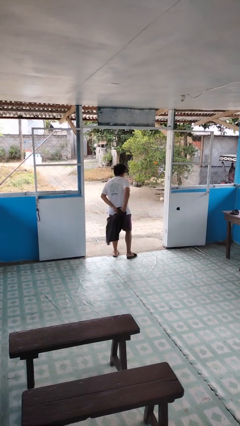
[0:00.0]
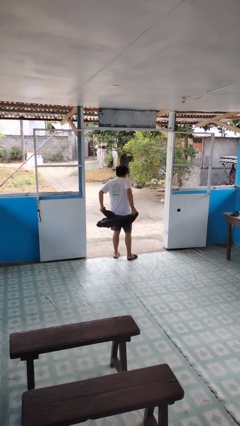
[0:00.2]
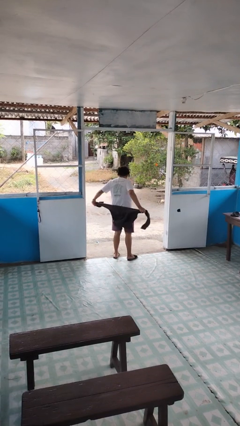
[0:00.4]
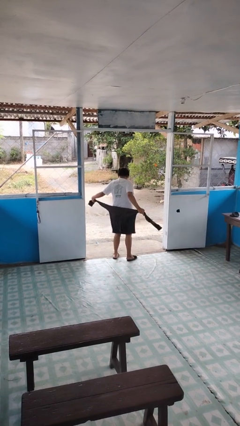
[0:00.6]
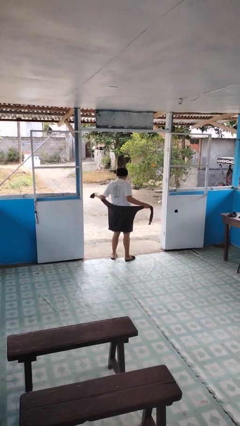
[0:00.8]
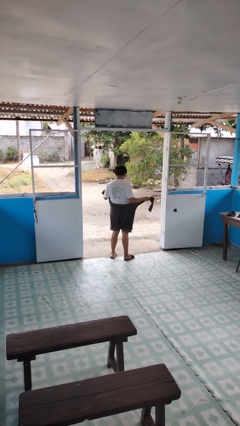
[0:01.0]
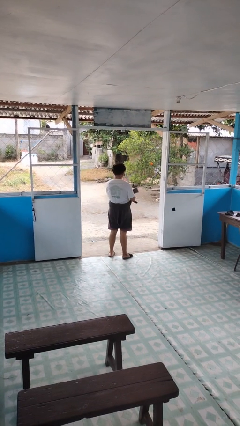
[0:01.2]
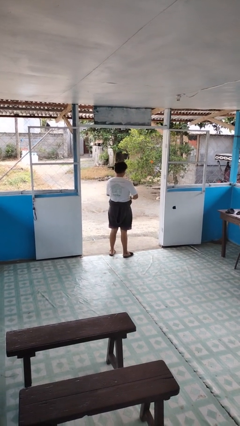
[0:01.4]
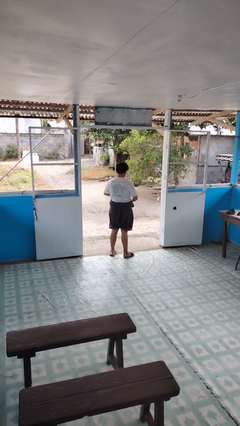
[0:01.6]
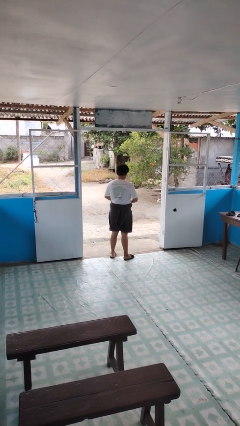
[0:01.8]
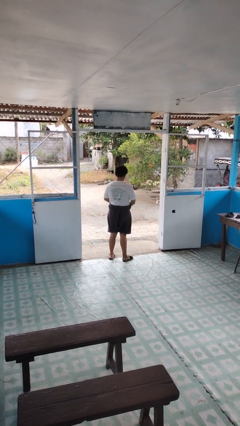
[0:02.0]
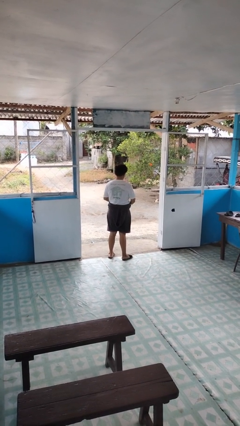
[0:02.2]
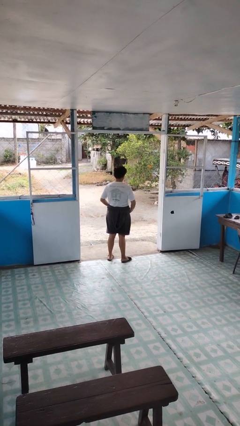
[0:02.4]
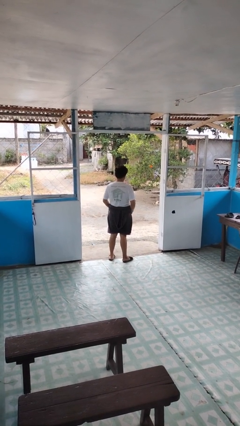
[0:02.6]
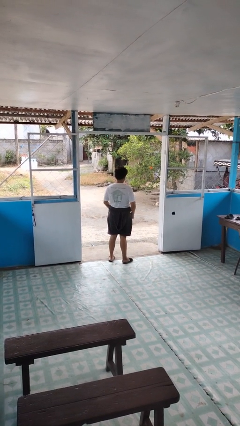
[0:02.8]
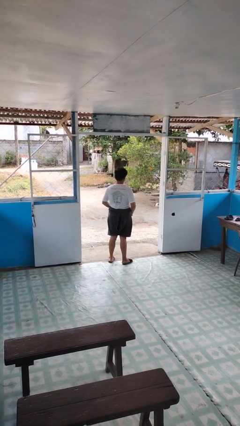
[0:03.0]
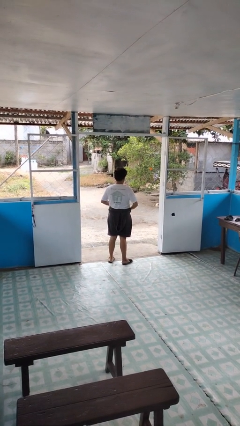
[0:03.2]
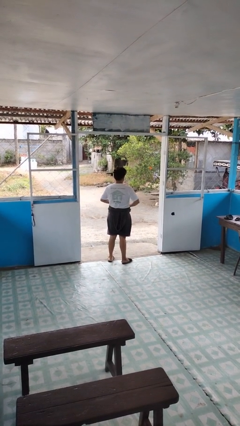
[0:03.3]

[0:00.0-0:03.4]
person ties jacket around waist

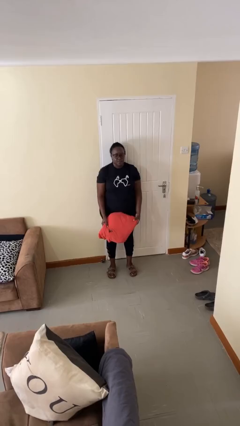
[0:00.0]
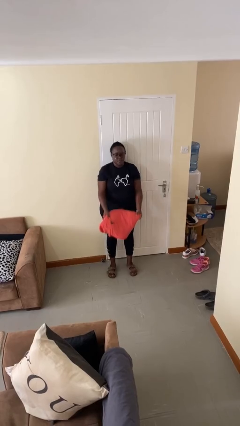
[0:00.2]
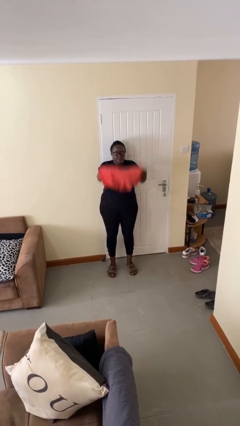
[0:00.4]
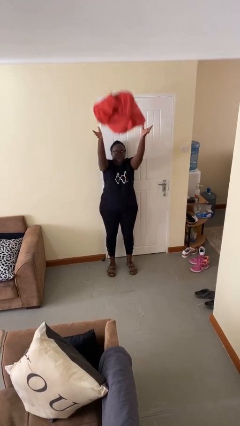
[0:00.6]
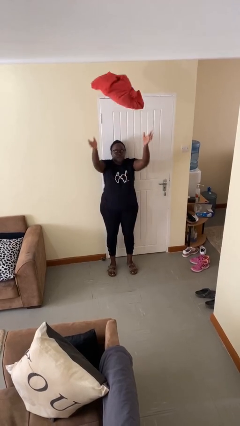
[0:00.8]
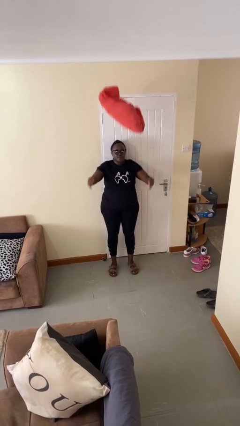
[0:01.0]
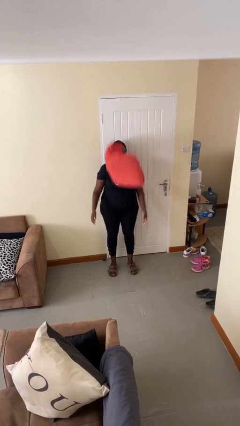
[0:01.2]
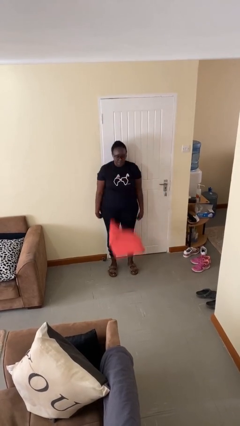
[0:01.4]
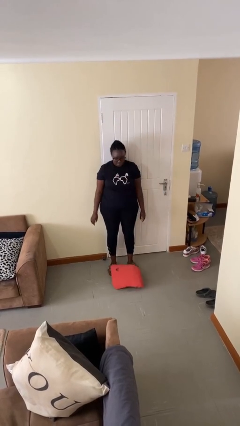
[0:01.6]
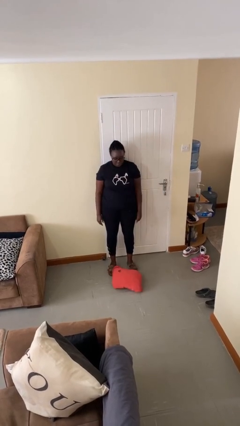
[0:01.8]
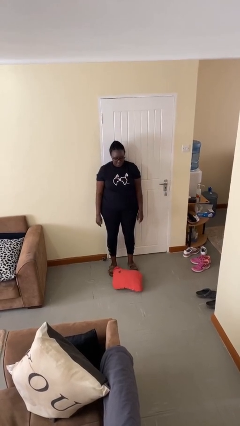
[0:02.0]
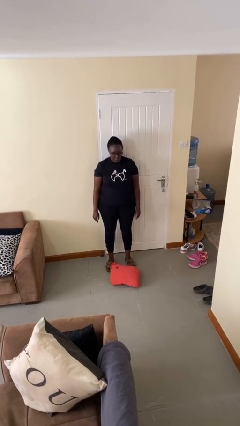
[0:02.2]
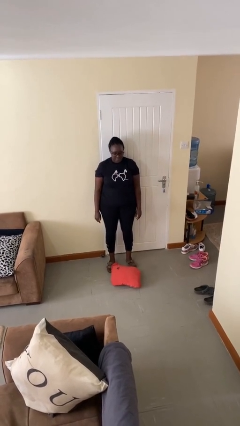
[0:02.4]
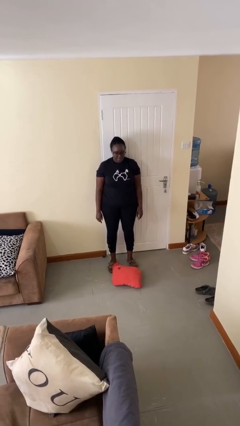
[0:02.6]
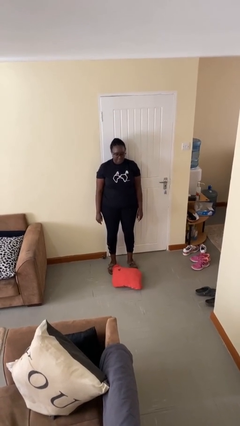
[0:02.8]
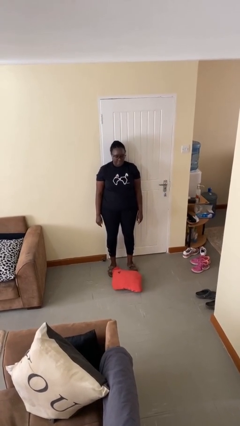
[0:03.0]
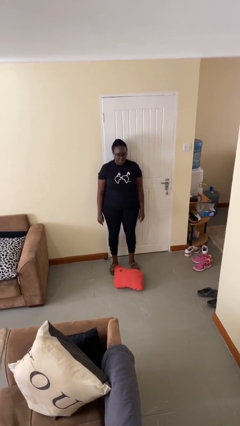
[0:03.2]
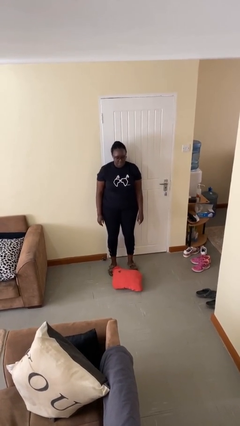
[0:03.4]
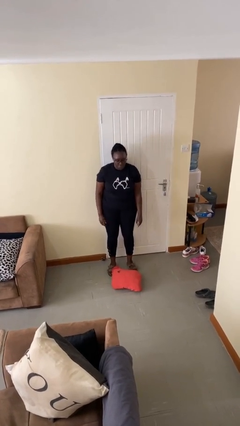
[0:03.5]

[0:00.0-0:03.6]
person throws object into air

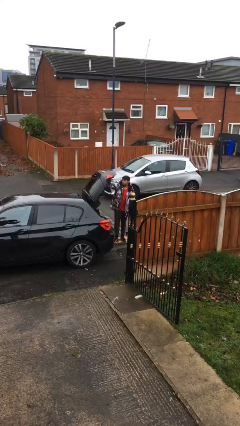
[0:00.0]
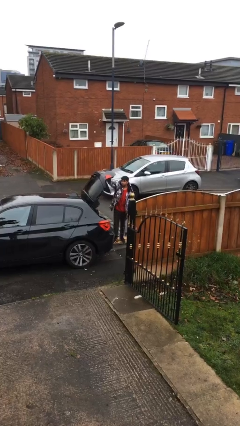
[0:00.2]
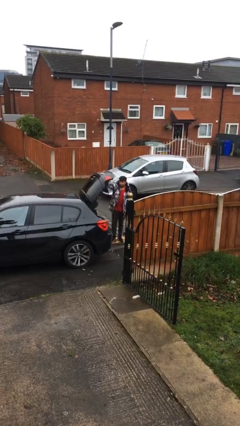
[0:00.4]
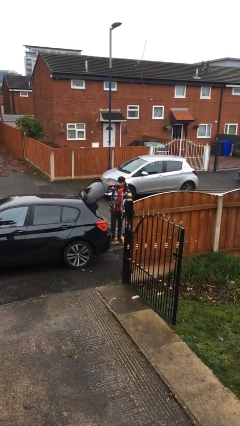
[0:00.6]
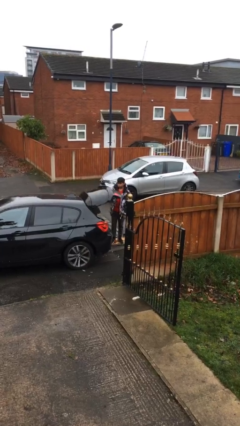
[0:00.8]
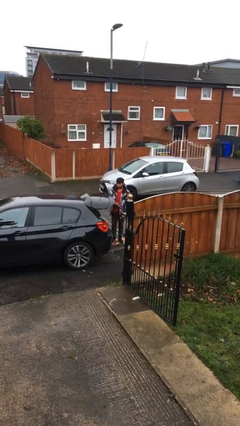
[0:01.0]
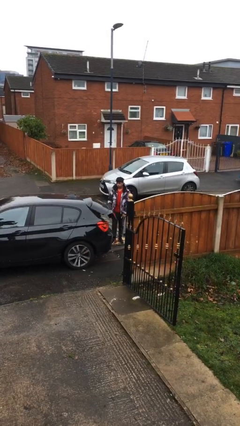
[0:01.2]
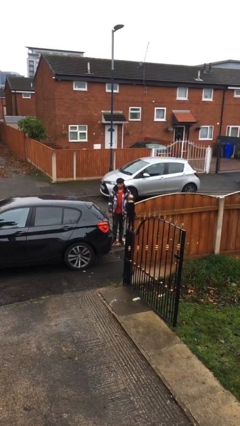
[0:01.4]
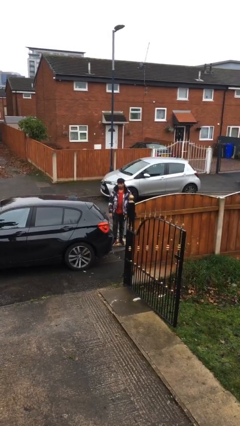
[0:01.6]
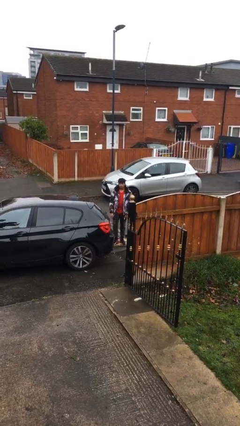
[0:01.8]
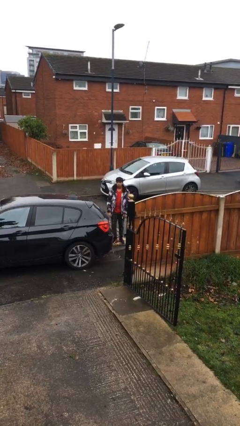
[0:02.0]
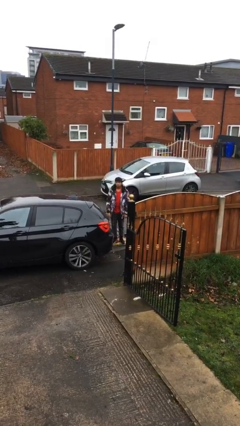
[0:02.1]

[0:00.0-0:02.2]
person closes car trunk

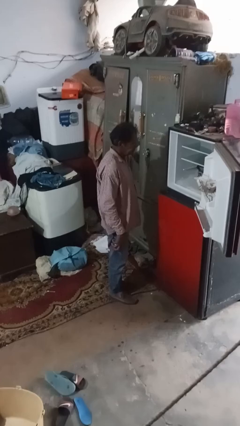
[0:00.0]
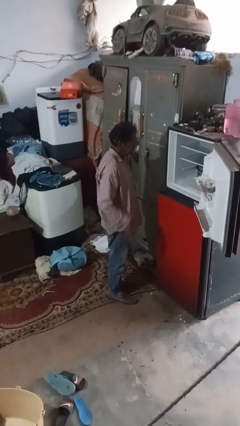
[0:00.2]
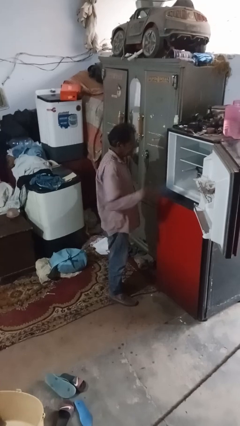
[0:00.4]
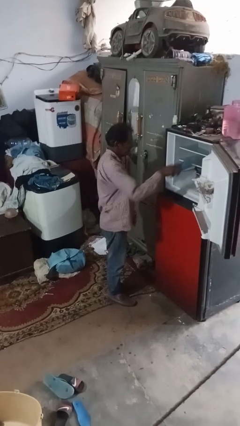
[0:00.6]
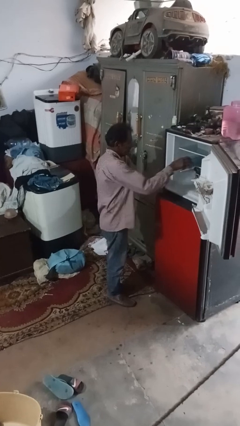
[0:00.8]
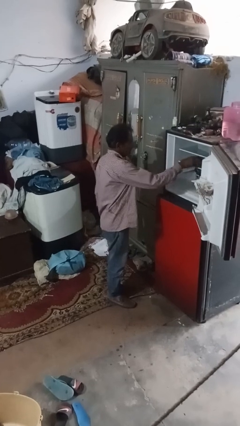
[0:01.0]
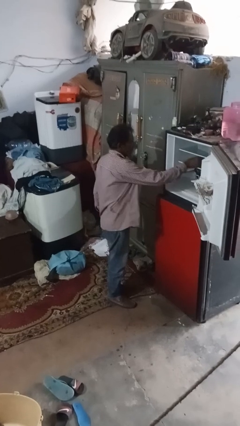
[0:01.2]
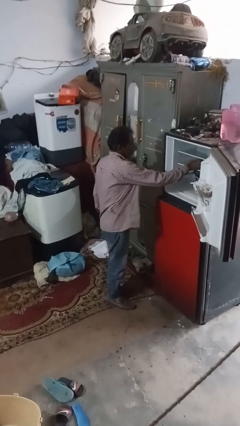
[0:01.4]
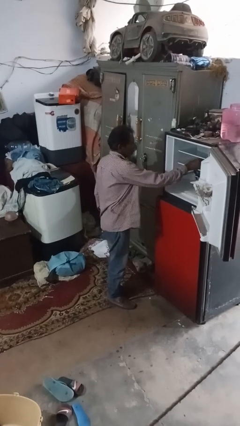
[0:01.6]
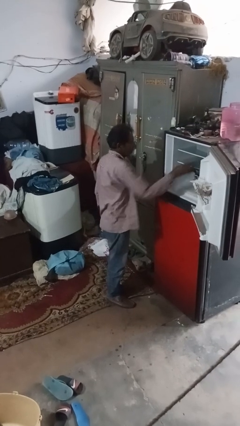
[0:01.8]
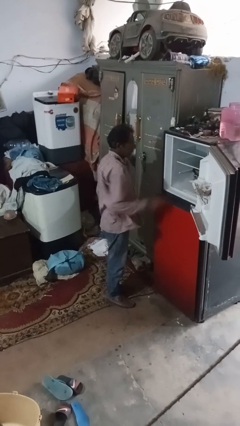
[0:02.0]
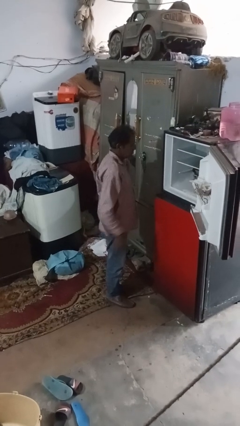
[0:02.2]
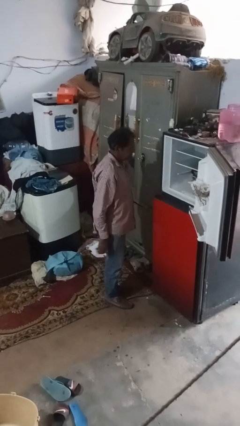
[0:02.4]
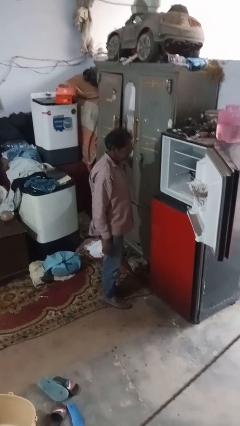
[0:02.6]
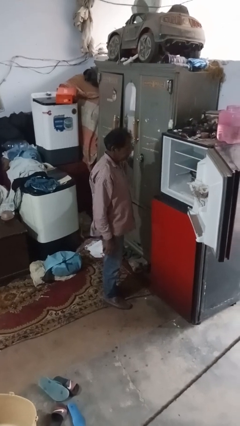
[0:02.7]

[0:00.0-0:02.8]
person puts object into refrigerator

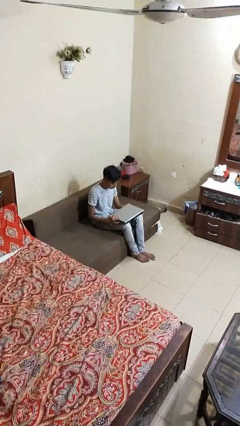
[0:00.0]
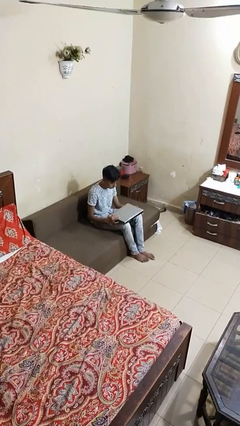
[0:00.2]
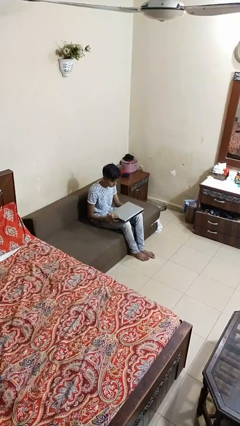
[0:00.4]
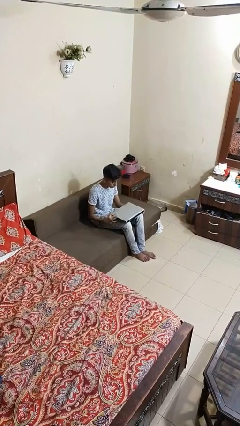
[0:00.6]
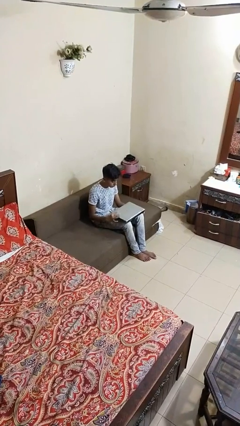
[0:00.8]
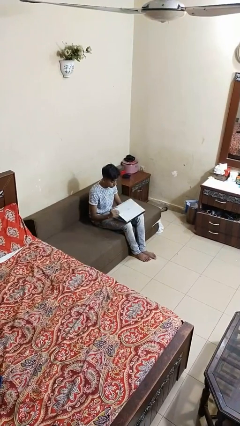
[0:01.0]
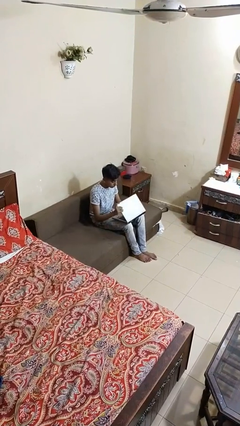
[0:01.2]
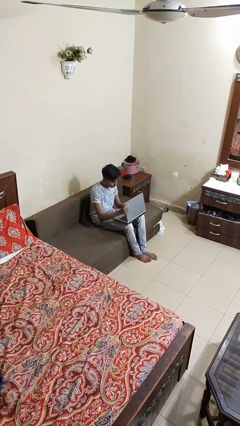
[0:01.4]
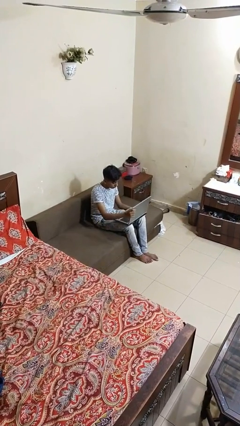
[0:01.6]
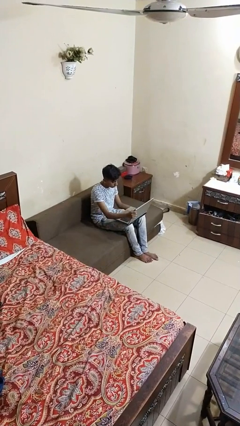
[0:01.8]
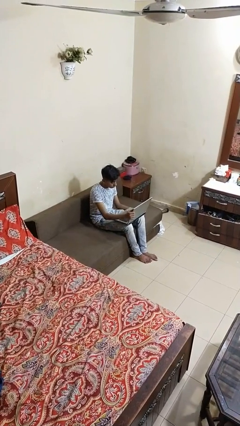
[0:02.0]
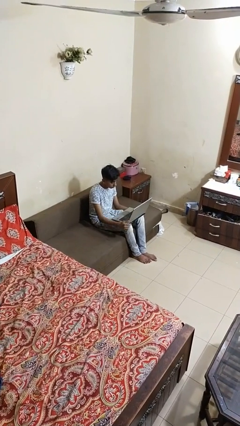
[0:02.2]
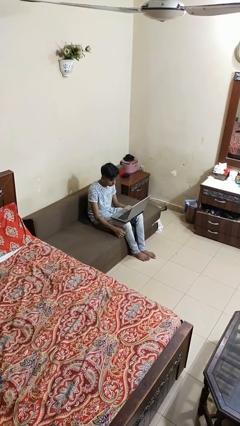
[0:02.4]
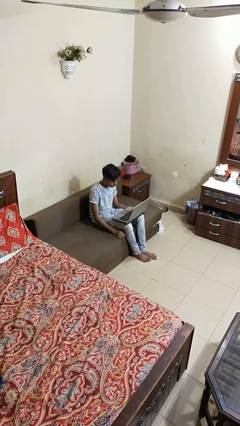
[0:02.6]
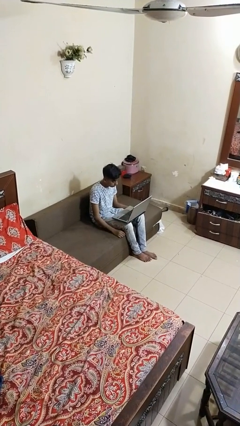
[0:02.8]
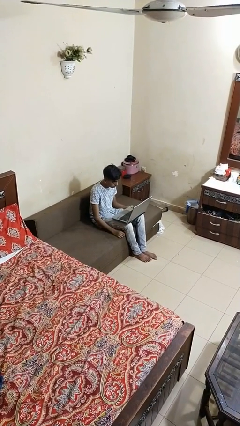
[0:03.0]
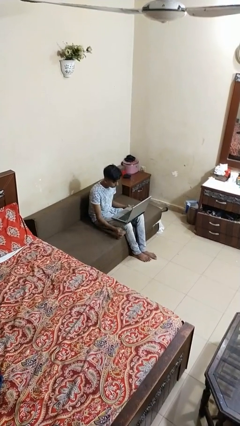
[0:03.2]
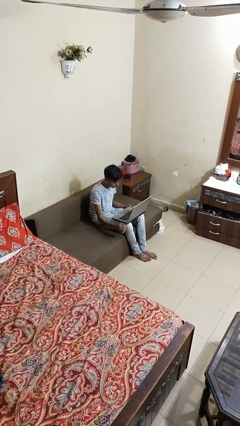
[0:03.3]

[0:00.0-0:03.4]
person opens laptop

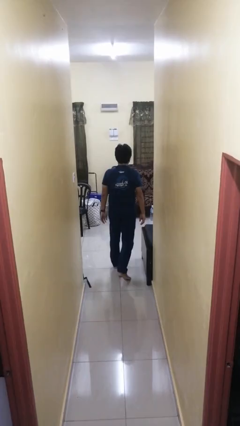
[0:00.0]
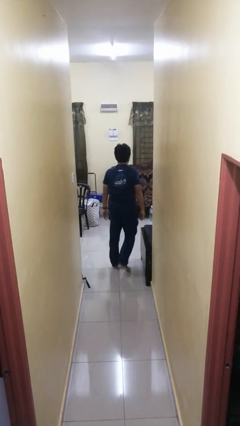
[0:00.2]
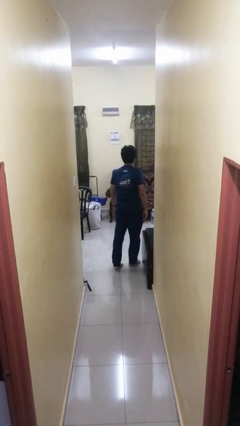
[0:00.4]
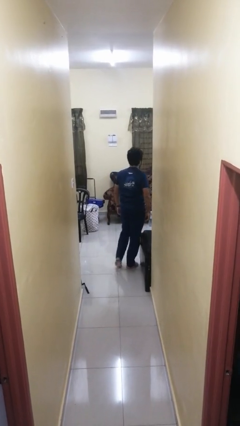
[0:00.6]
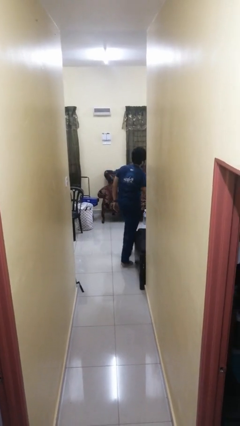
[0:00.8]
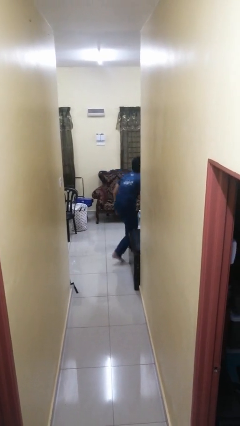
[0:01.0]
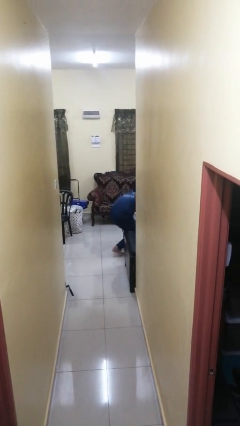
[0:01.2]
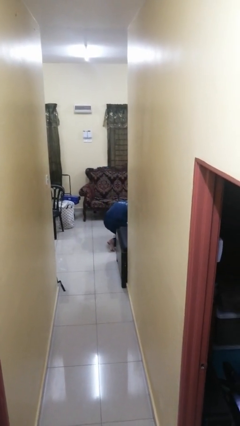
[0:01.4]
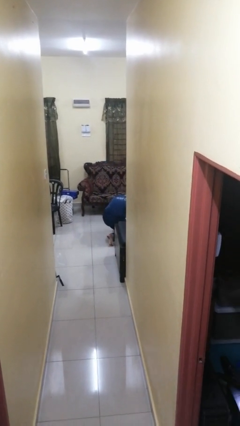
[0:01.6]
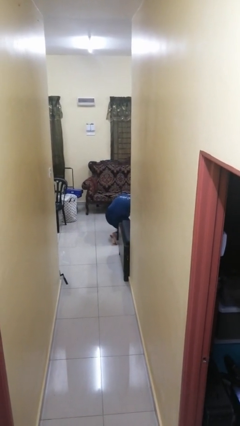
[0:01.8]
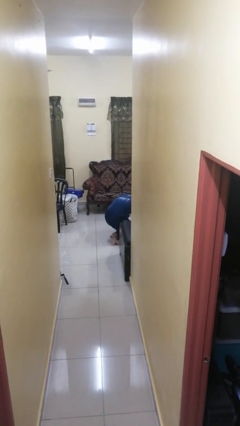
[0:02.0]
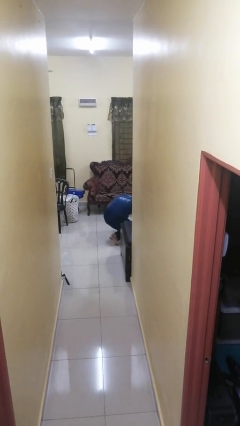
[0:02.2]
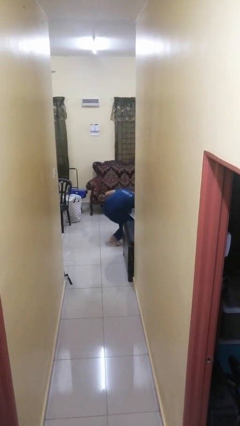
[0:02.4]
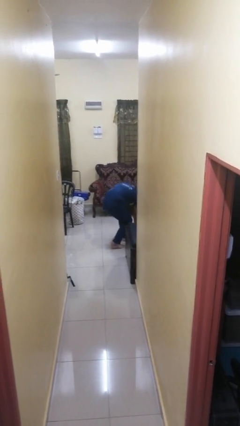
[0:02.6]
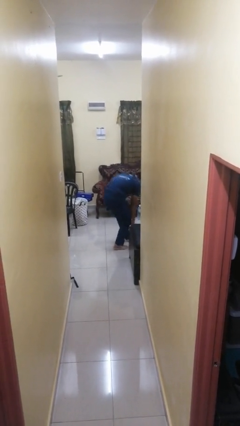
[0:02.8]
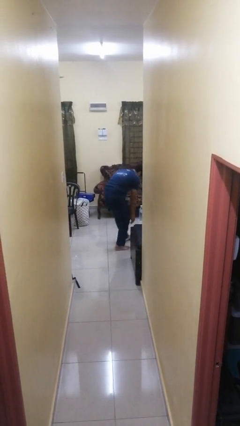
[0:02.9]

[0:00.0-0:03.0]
person trips on object on floor
